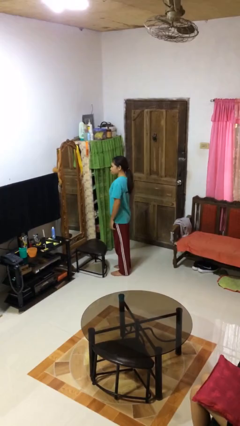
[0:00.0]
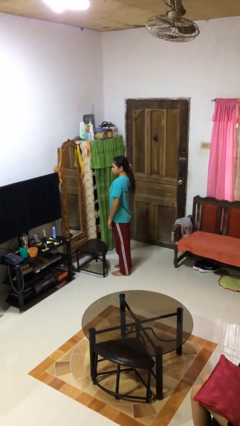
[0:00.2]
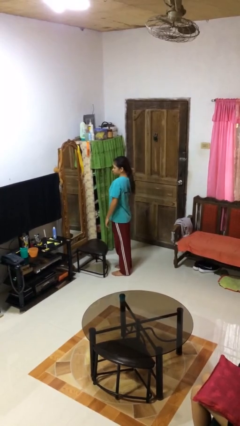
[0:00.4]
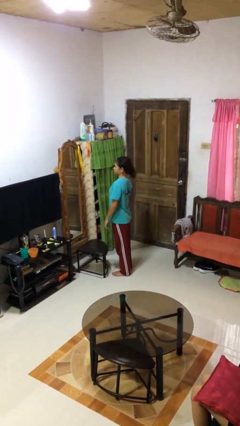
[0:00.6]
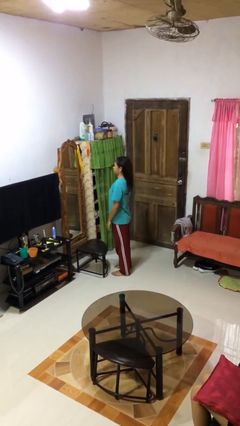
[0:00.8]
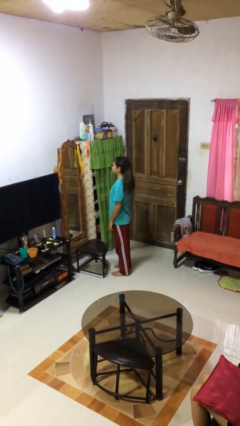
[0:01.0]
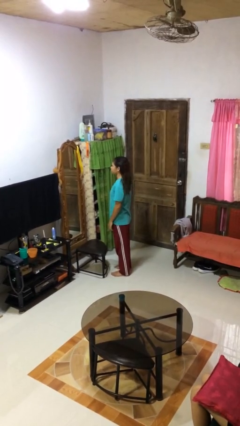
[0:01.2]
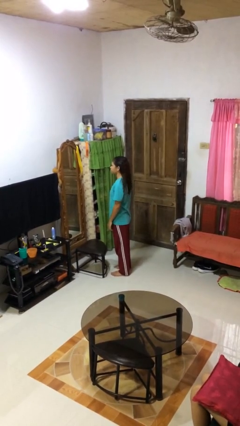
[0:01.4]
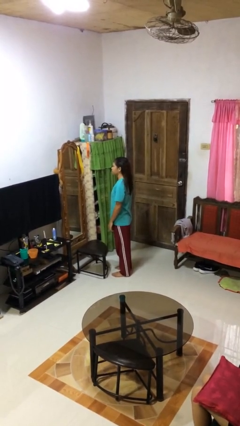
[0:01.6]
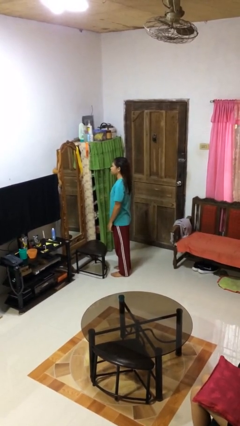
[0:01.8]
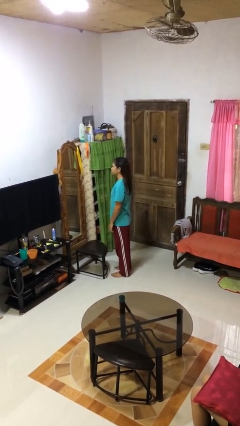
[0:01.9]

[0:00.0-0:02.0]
person takes off hairtie

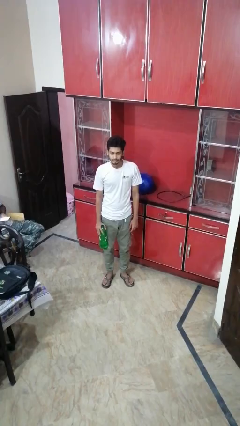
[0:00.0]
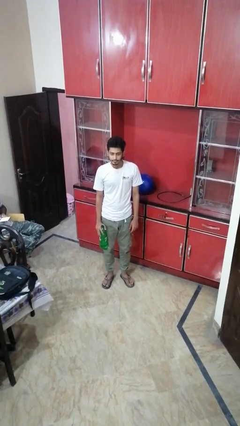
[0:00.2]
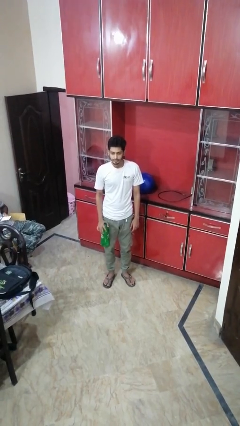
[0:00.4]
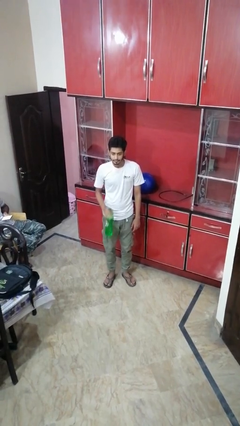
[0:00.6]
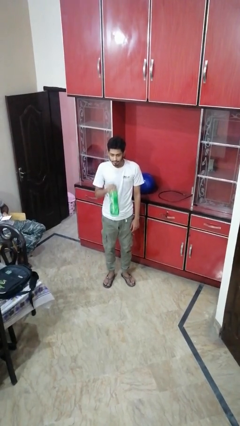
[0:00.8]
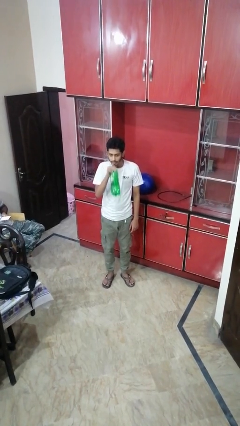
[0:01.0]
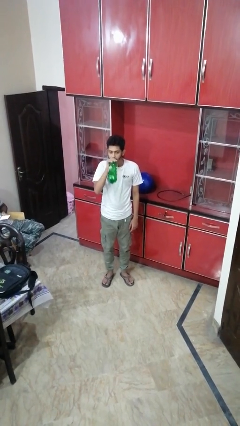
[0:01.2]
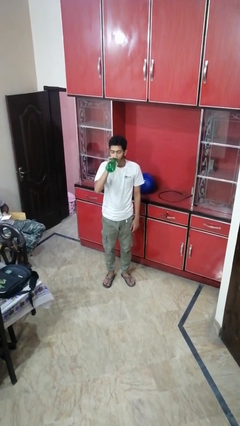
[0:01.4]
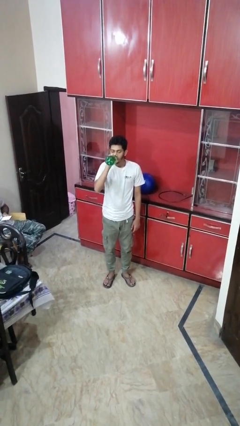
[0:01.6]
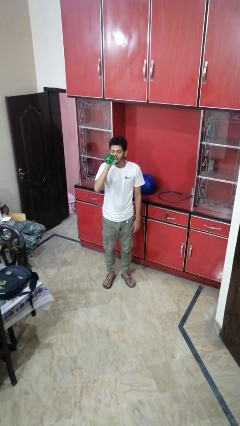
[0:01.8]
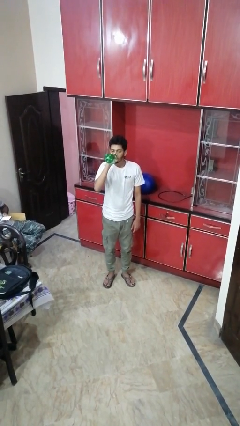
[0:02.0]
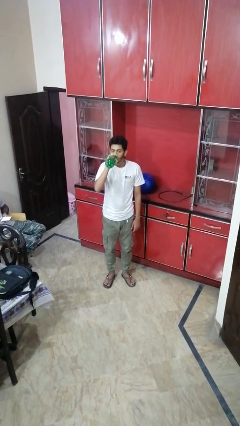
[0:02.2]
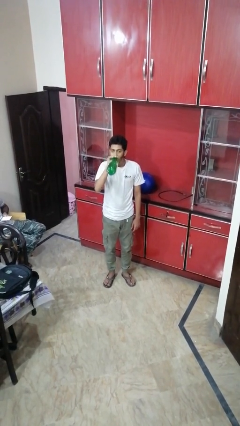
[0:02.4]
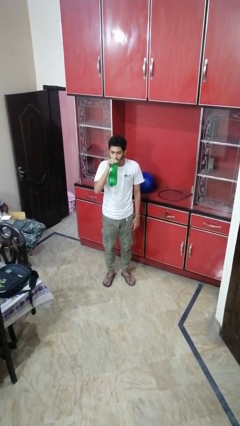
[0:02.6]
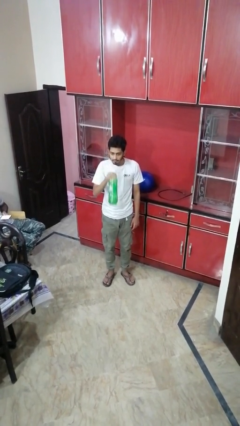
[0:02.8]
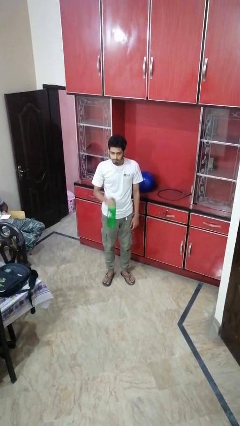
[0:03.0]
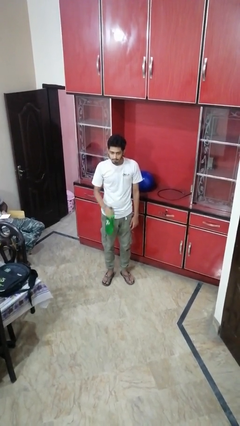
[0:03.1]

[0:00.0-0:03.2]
person drinks from bottle

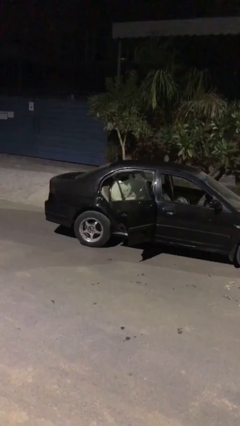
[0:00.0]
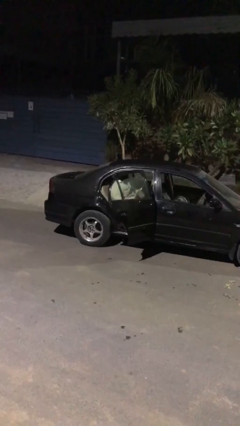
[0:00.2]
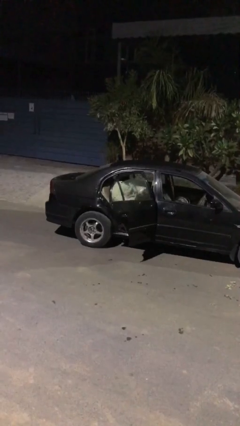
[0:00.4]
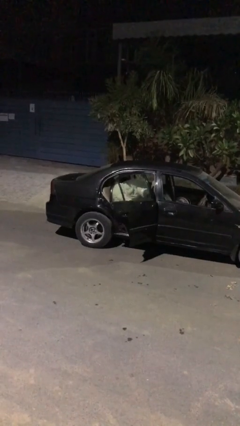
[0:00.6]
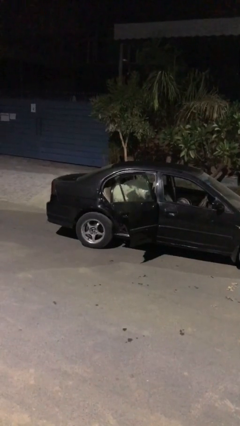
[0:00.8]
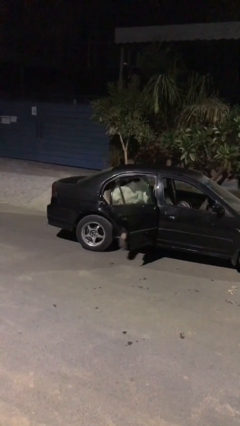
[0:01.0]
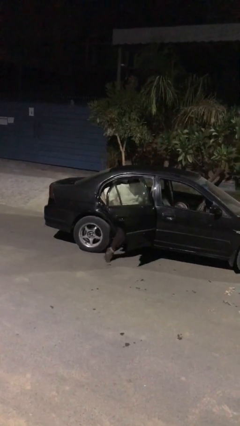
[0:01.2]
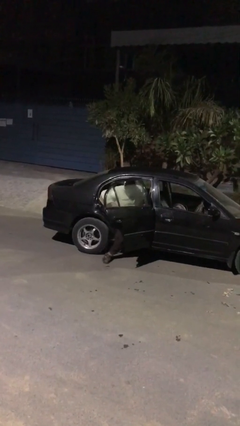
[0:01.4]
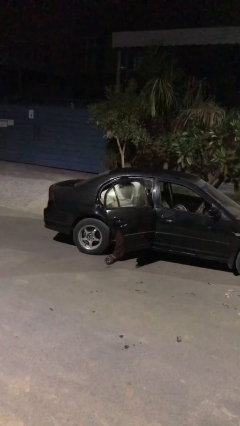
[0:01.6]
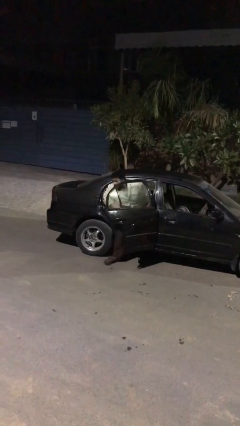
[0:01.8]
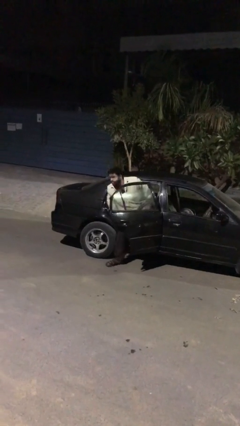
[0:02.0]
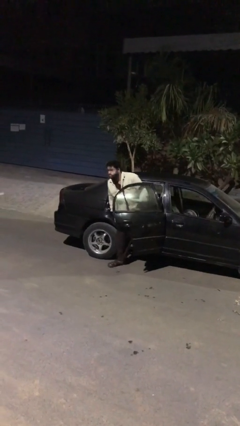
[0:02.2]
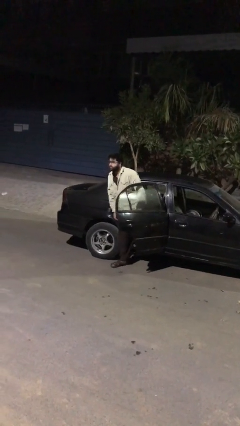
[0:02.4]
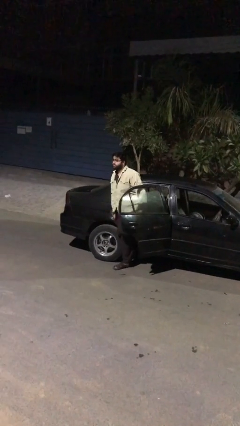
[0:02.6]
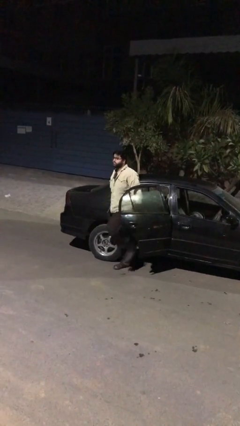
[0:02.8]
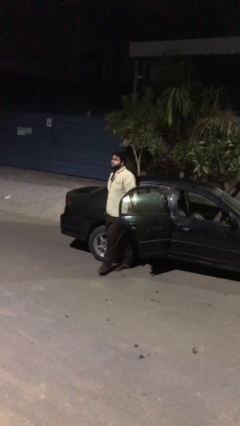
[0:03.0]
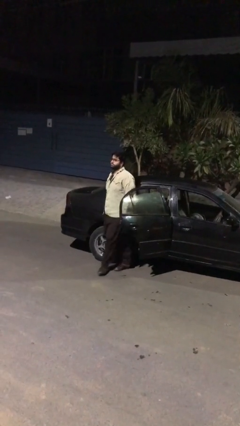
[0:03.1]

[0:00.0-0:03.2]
person exits car

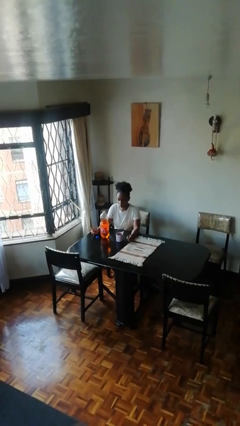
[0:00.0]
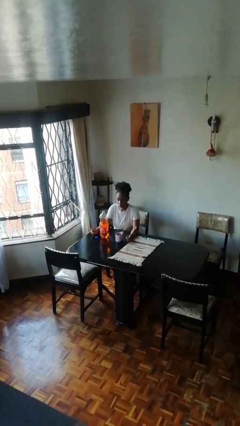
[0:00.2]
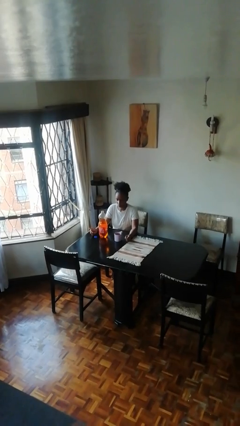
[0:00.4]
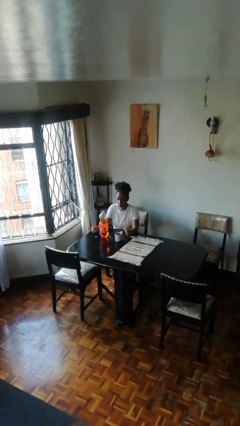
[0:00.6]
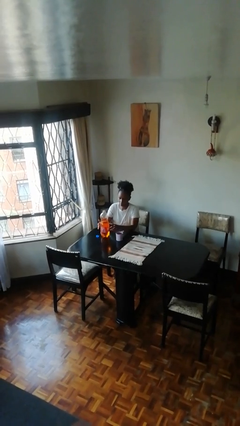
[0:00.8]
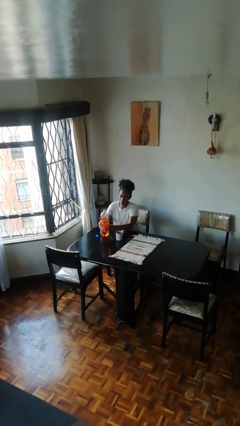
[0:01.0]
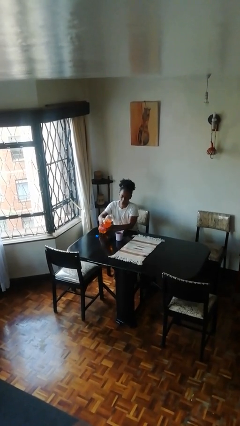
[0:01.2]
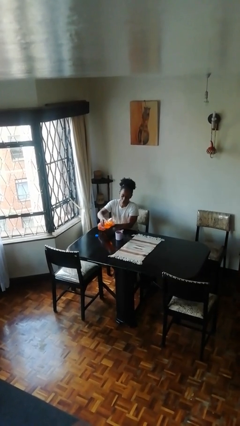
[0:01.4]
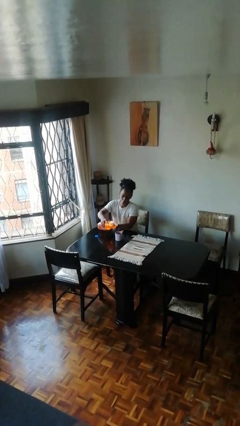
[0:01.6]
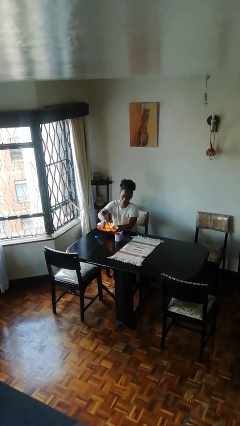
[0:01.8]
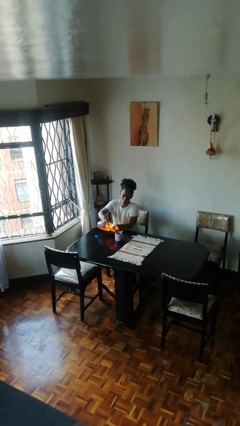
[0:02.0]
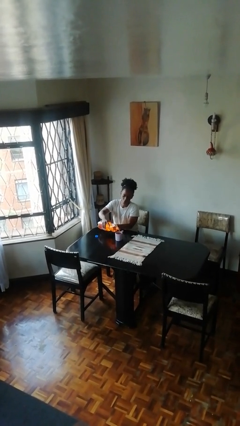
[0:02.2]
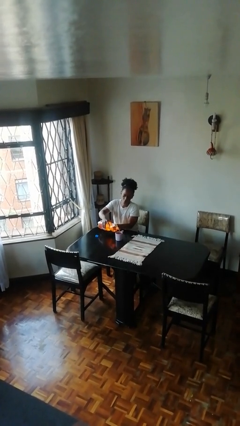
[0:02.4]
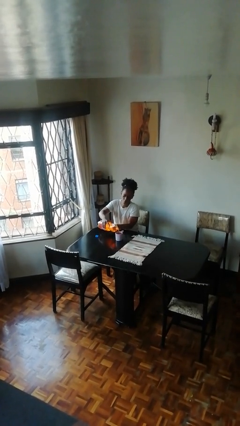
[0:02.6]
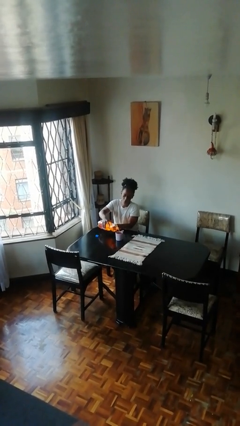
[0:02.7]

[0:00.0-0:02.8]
person pours liquid into cup

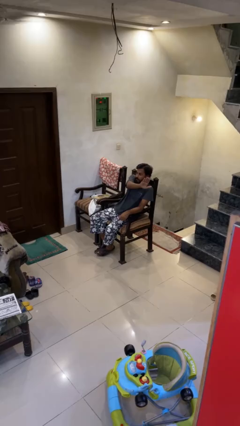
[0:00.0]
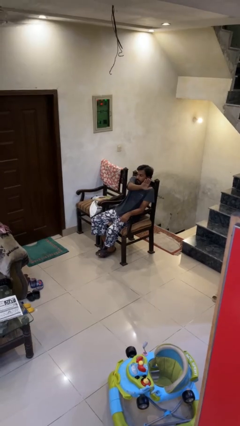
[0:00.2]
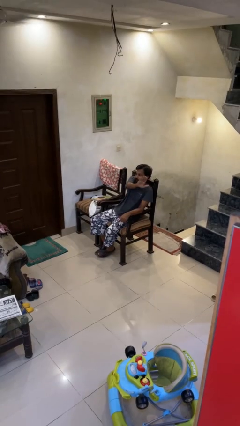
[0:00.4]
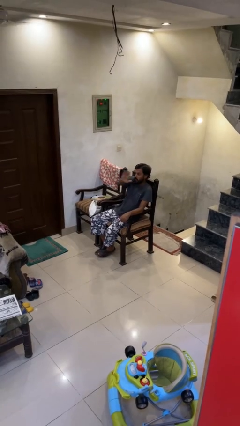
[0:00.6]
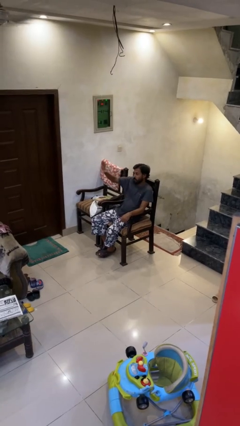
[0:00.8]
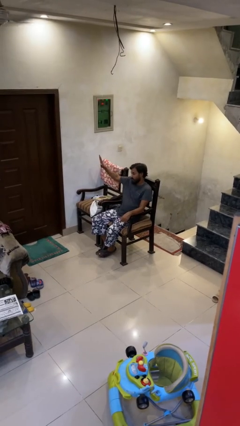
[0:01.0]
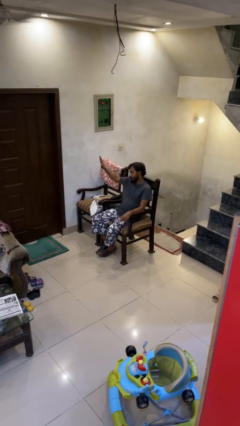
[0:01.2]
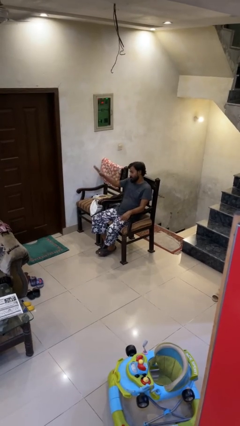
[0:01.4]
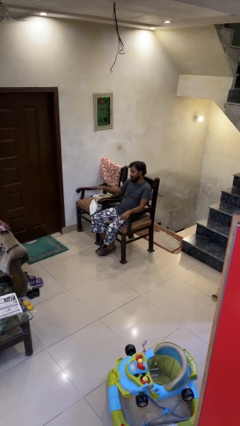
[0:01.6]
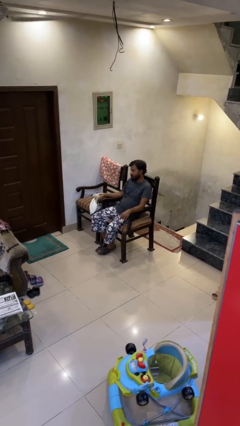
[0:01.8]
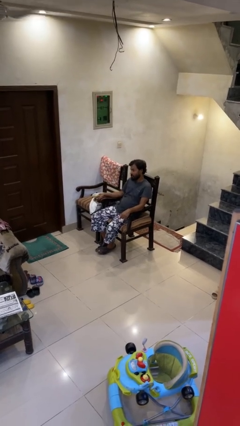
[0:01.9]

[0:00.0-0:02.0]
person gestures swipe right

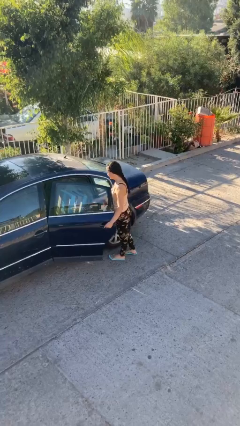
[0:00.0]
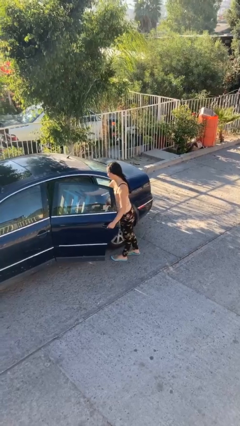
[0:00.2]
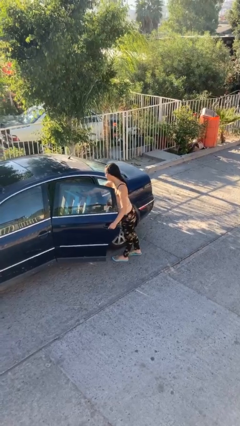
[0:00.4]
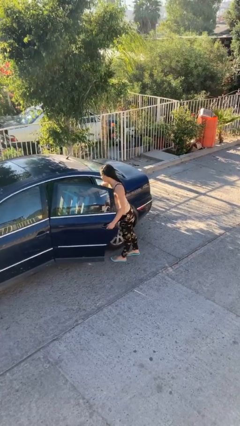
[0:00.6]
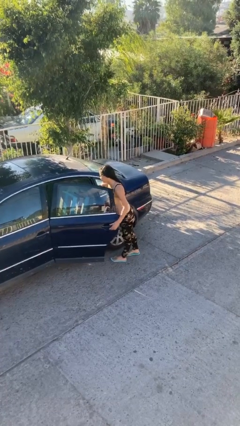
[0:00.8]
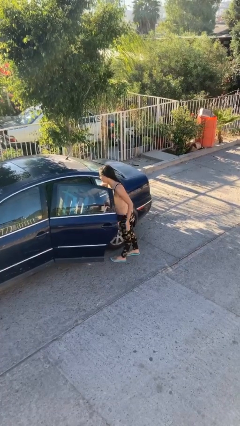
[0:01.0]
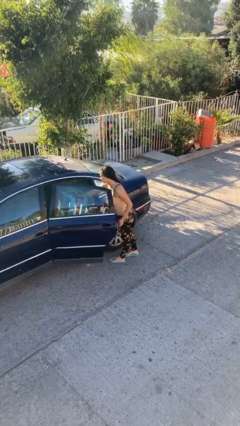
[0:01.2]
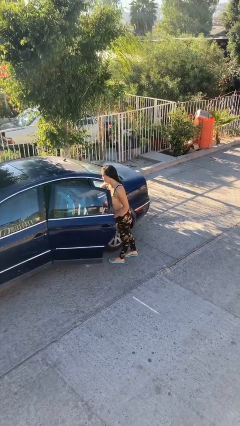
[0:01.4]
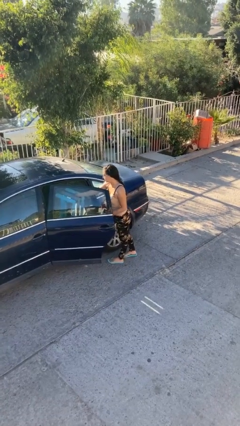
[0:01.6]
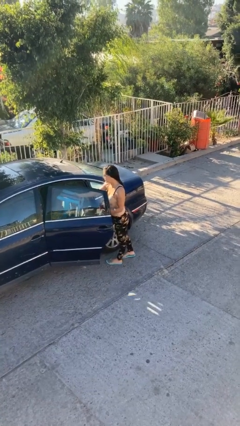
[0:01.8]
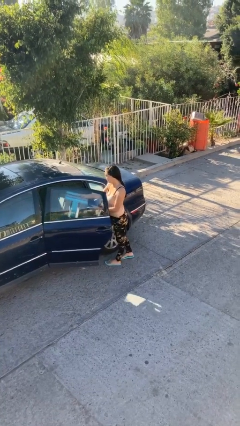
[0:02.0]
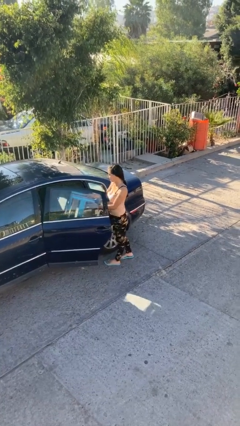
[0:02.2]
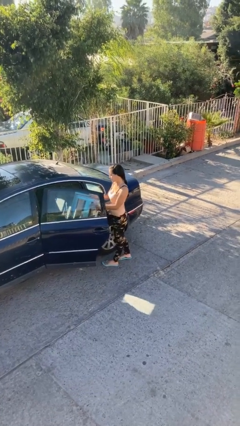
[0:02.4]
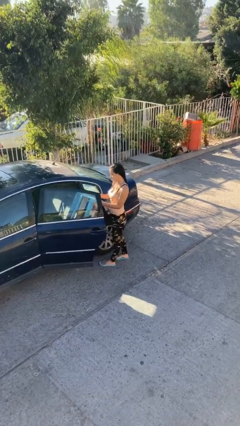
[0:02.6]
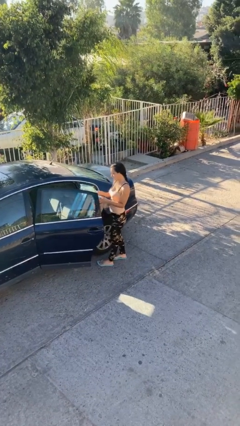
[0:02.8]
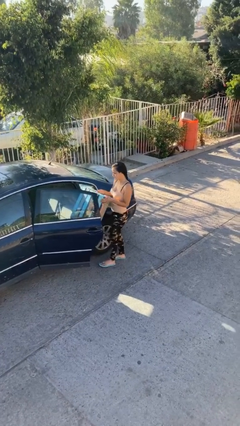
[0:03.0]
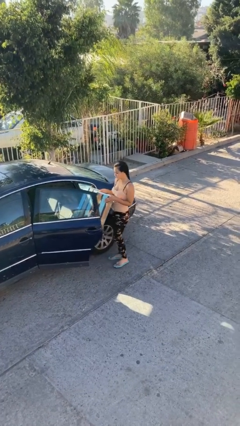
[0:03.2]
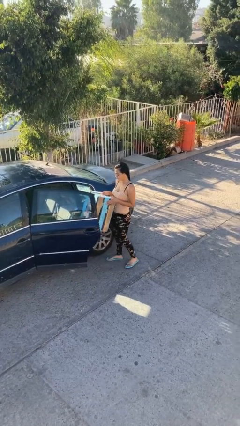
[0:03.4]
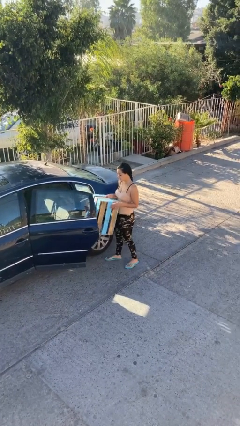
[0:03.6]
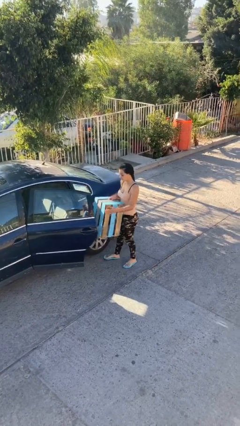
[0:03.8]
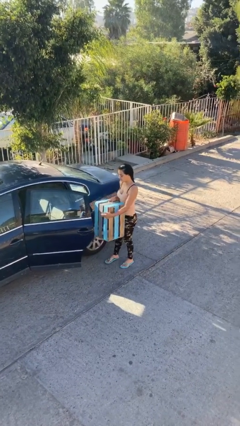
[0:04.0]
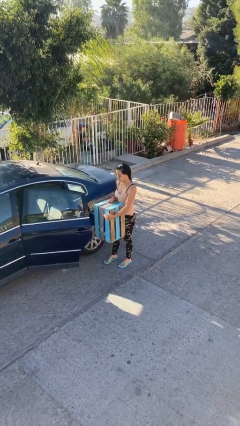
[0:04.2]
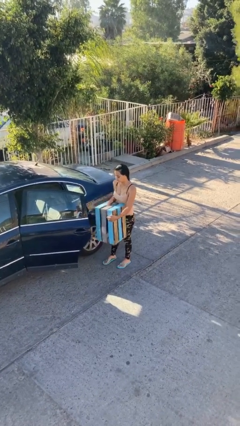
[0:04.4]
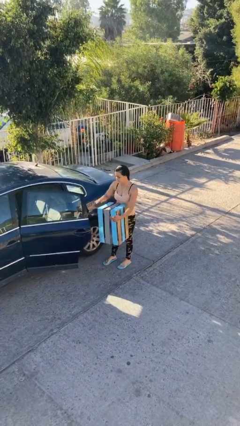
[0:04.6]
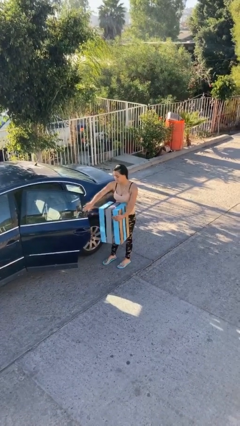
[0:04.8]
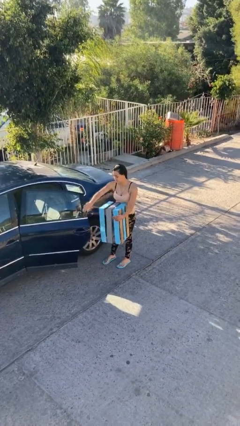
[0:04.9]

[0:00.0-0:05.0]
person unloads car
